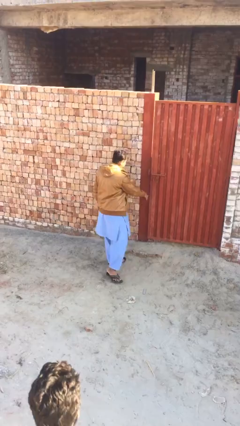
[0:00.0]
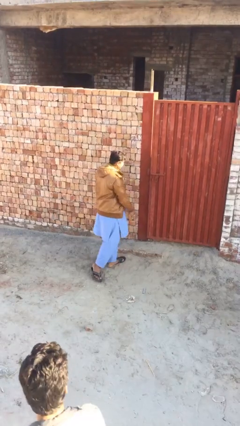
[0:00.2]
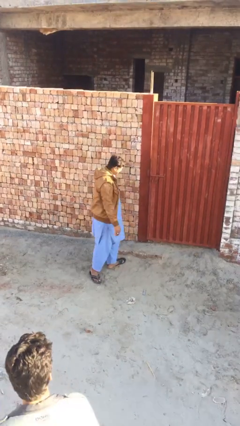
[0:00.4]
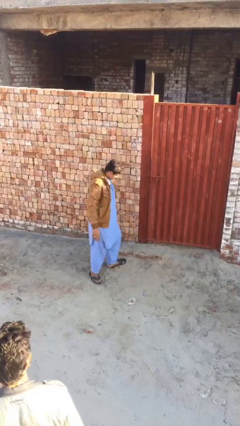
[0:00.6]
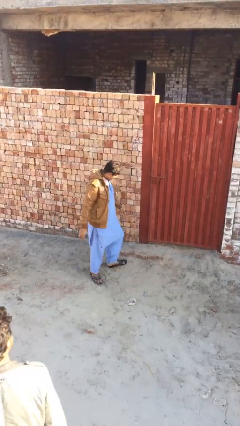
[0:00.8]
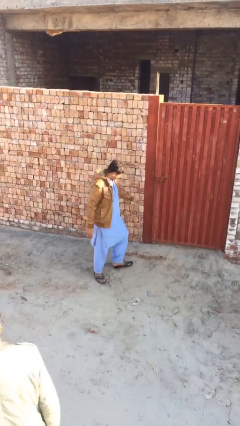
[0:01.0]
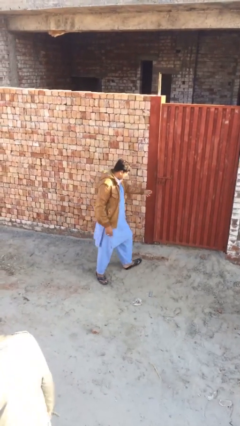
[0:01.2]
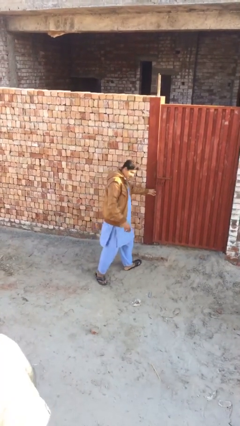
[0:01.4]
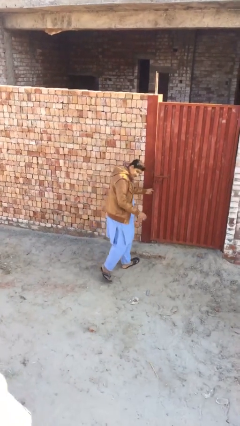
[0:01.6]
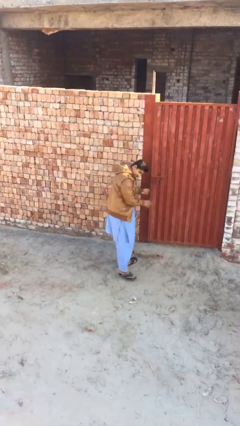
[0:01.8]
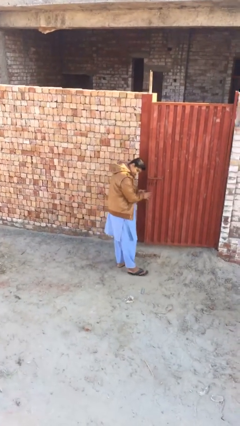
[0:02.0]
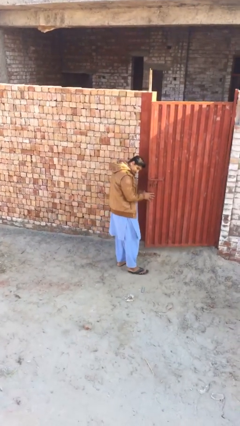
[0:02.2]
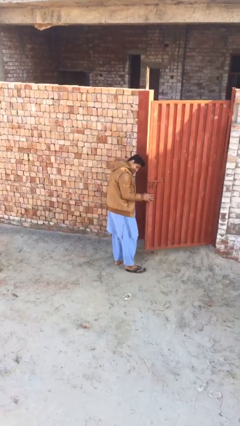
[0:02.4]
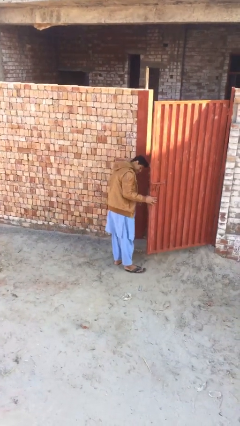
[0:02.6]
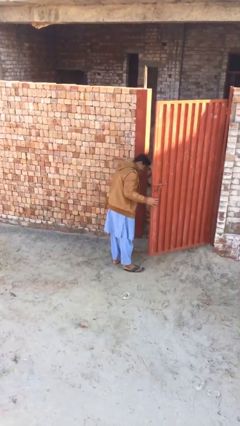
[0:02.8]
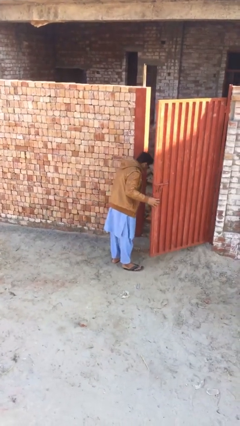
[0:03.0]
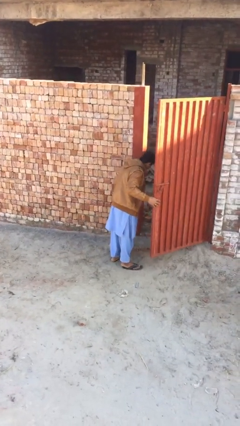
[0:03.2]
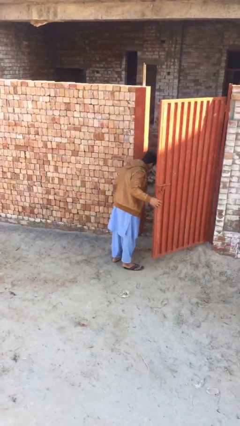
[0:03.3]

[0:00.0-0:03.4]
person opens facility door

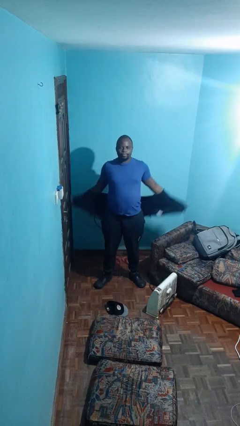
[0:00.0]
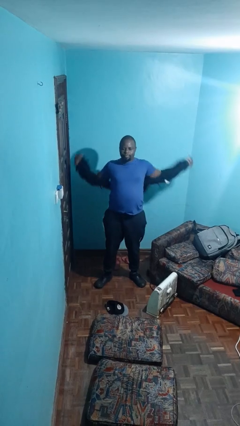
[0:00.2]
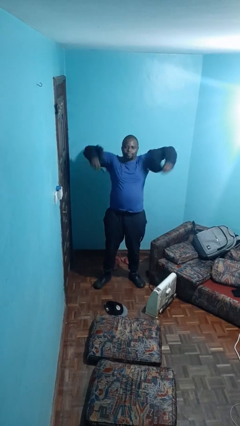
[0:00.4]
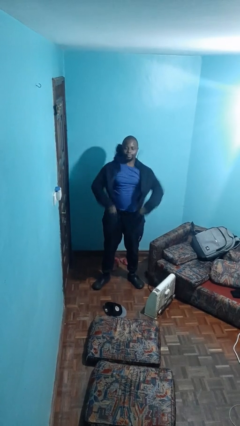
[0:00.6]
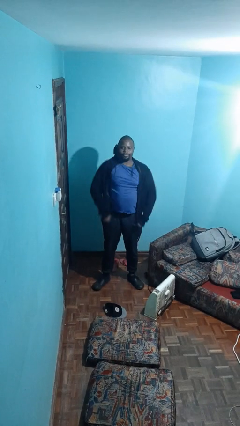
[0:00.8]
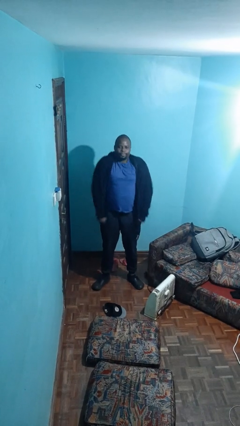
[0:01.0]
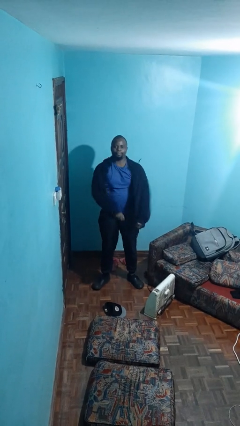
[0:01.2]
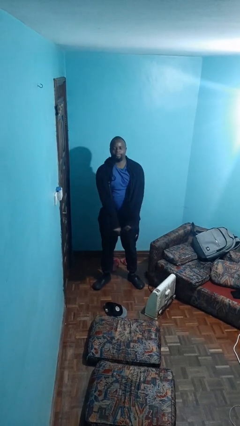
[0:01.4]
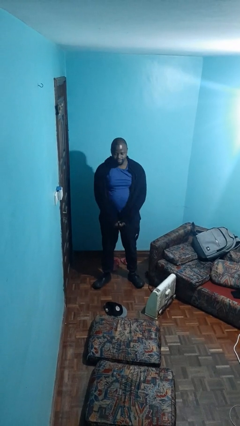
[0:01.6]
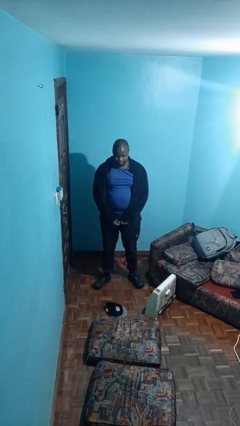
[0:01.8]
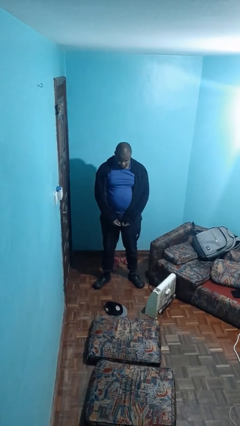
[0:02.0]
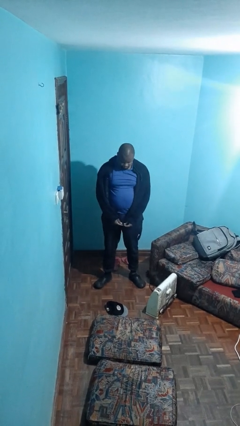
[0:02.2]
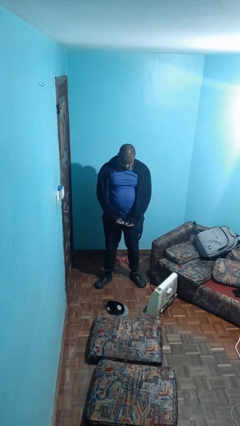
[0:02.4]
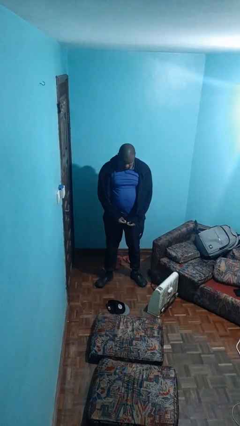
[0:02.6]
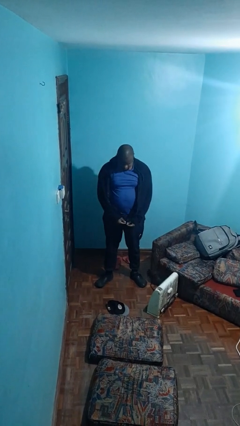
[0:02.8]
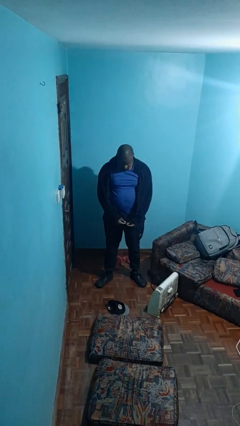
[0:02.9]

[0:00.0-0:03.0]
person puts on jacket

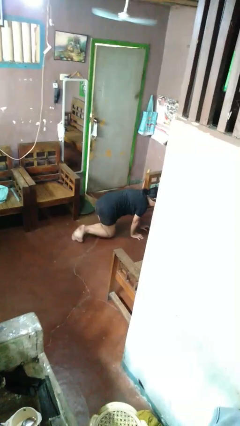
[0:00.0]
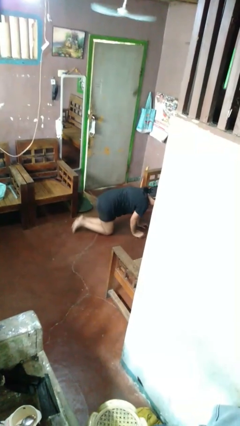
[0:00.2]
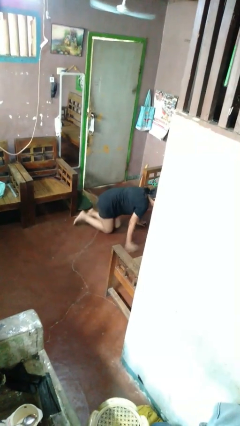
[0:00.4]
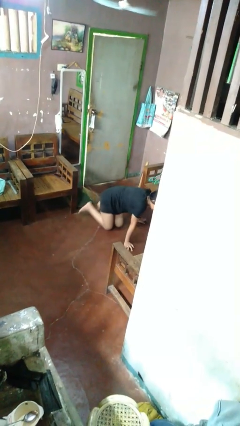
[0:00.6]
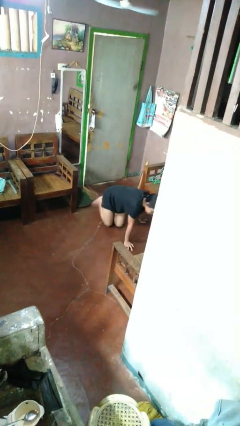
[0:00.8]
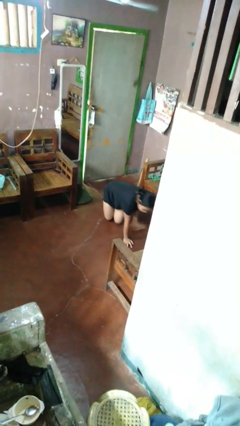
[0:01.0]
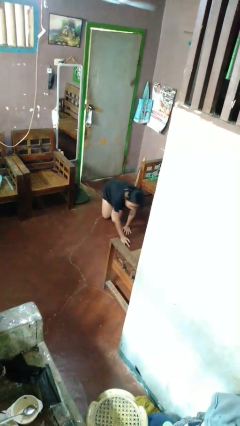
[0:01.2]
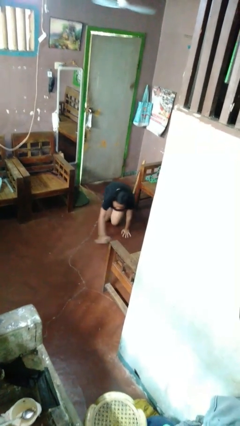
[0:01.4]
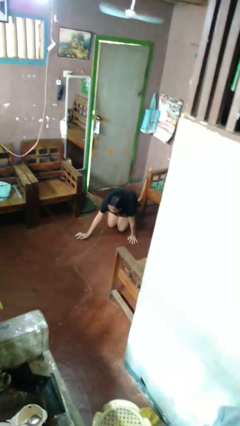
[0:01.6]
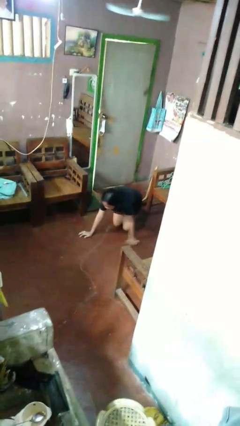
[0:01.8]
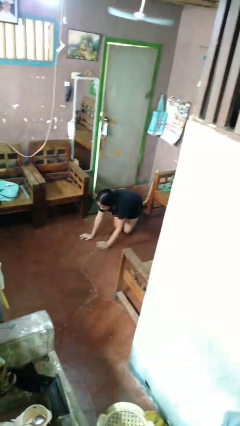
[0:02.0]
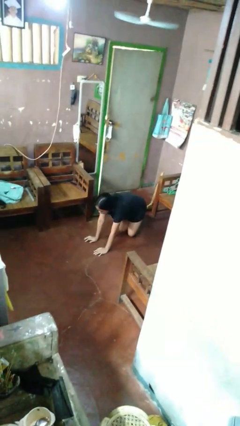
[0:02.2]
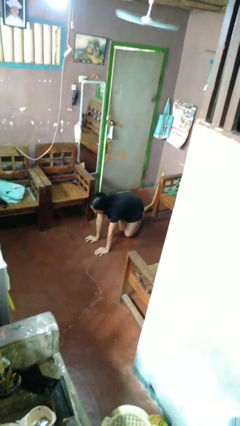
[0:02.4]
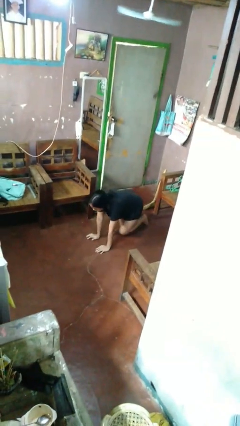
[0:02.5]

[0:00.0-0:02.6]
person crawls

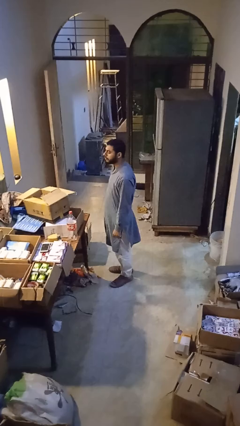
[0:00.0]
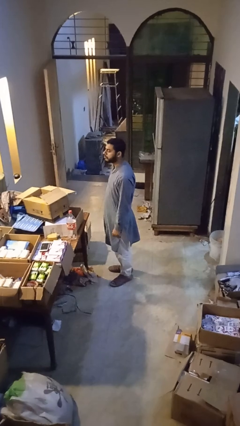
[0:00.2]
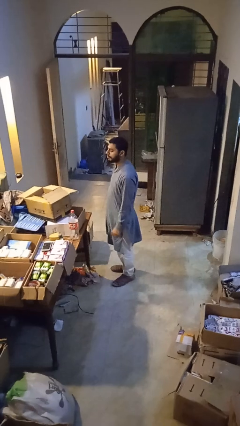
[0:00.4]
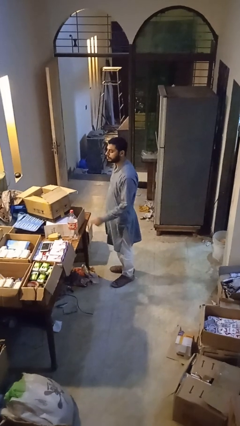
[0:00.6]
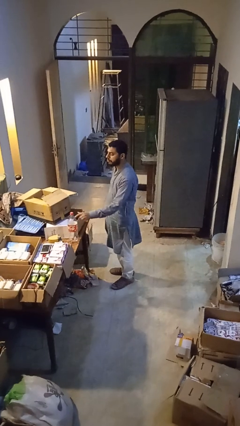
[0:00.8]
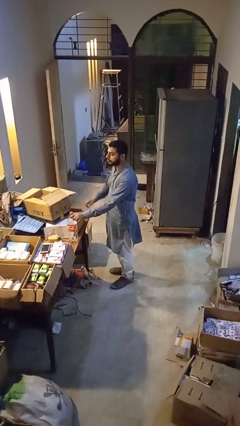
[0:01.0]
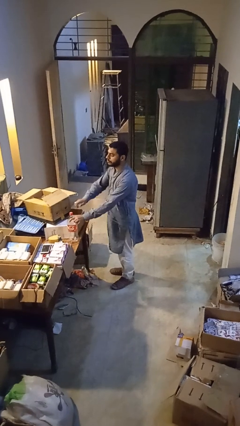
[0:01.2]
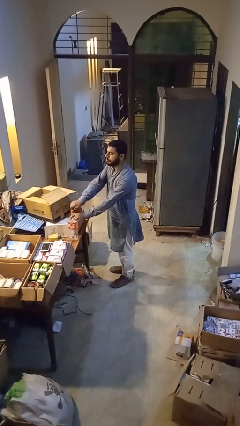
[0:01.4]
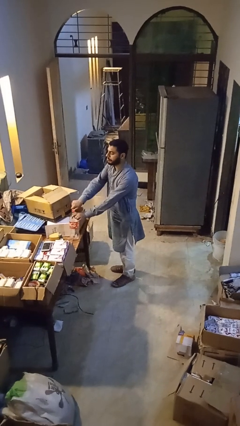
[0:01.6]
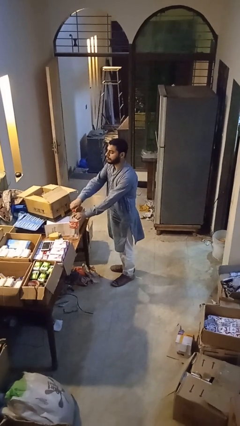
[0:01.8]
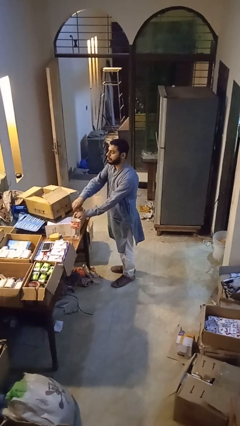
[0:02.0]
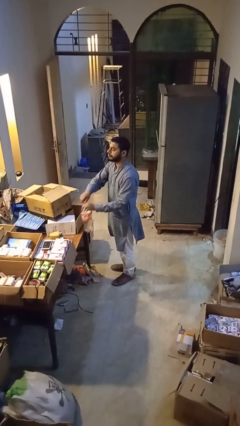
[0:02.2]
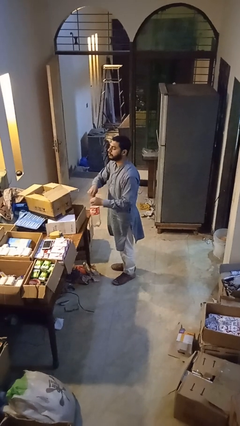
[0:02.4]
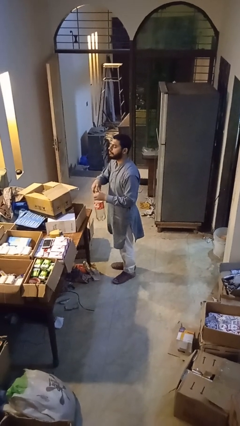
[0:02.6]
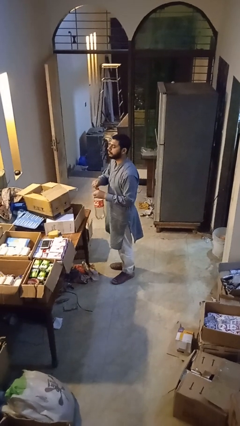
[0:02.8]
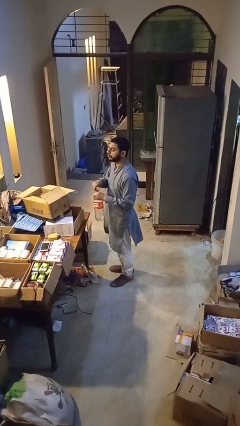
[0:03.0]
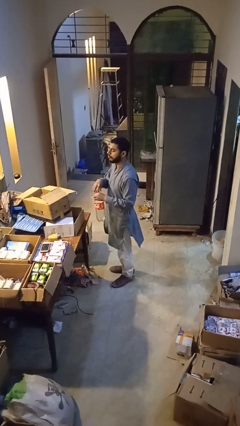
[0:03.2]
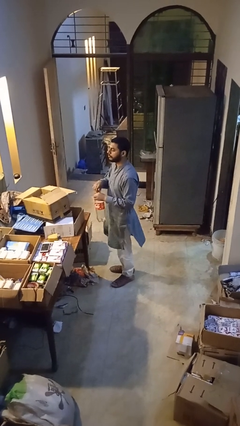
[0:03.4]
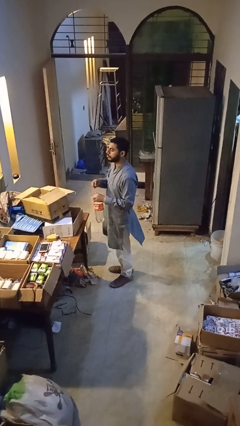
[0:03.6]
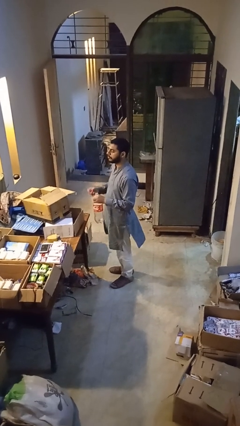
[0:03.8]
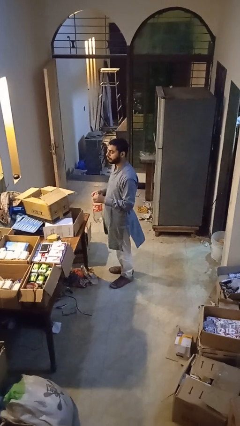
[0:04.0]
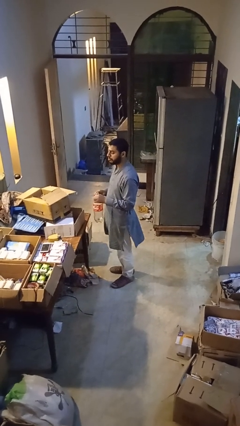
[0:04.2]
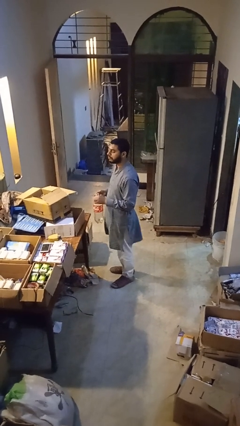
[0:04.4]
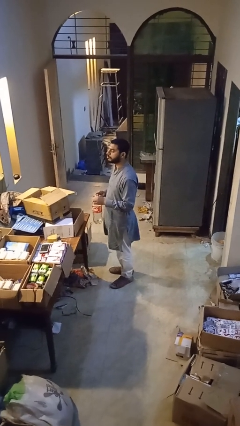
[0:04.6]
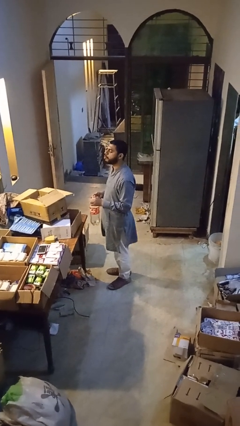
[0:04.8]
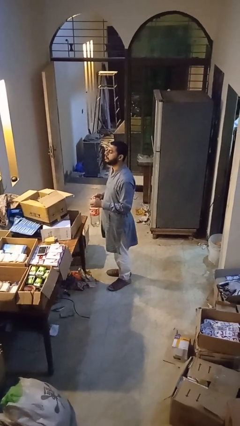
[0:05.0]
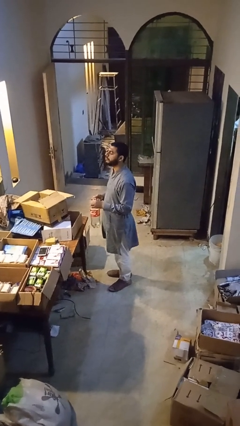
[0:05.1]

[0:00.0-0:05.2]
person unscrews lid from bottle

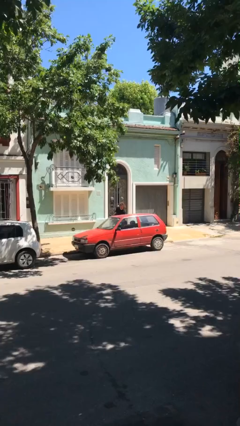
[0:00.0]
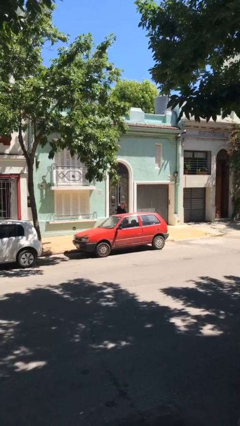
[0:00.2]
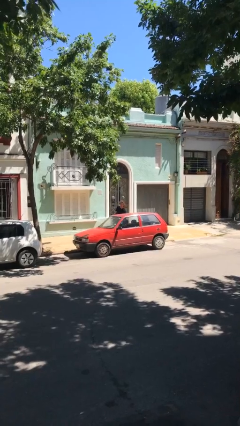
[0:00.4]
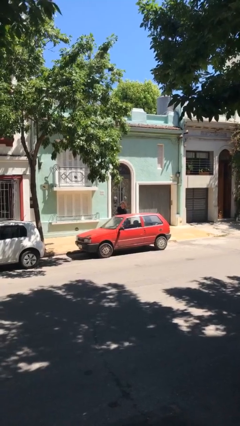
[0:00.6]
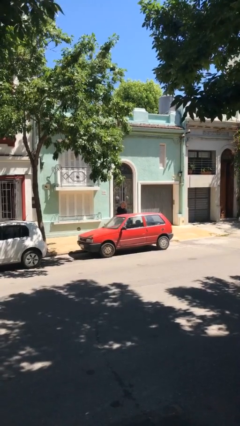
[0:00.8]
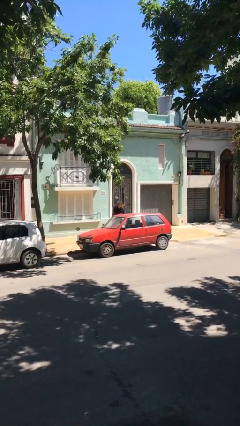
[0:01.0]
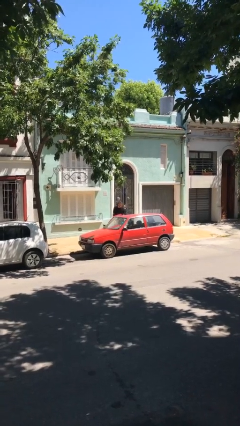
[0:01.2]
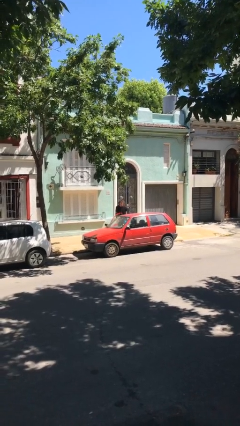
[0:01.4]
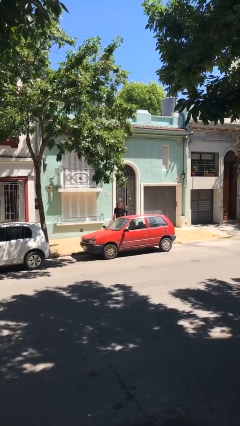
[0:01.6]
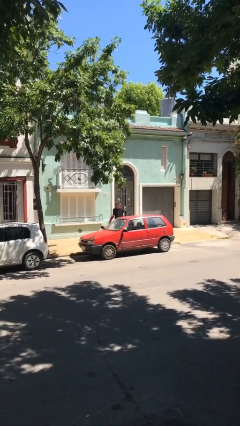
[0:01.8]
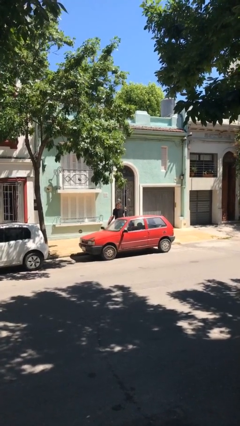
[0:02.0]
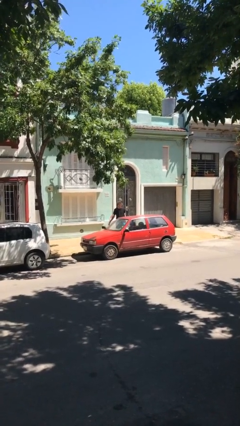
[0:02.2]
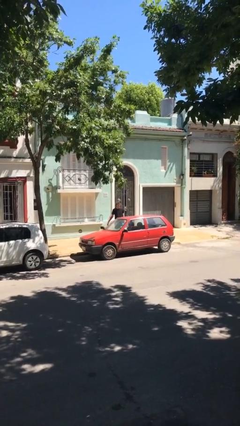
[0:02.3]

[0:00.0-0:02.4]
person opens car door

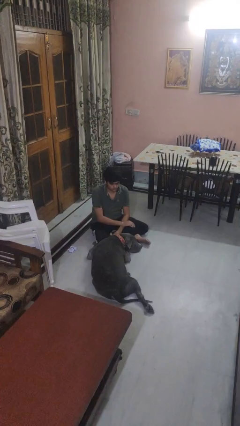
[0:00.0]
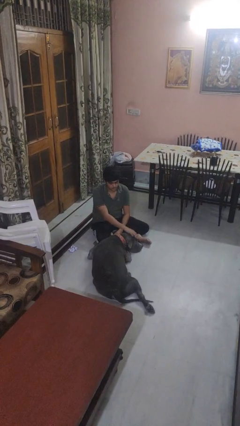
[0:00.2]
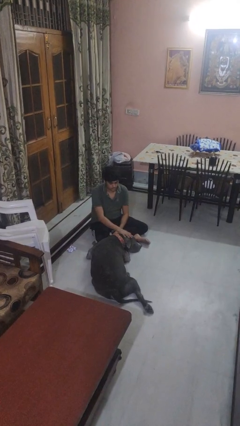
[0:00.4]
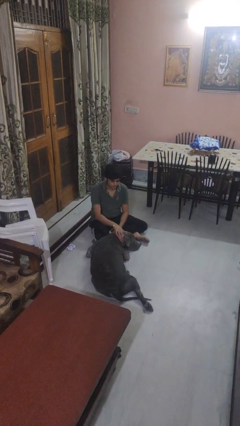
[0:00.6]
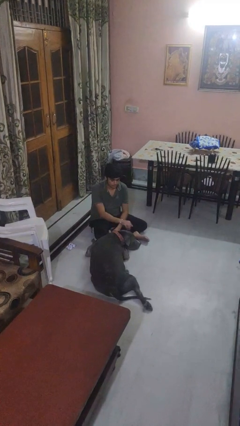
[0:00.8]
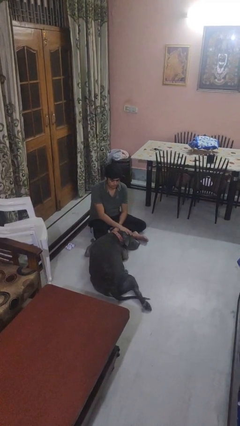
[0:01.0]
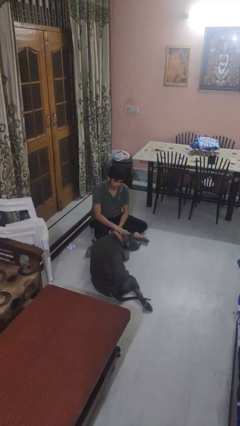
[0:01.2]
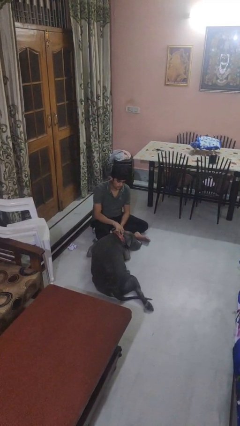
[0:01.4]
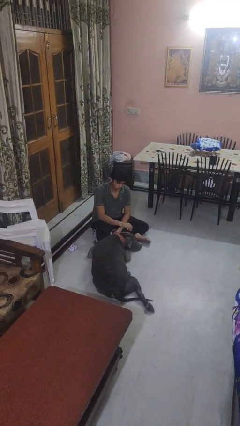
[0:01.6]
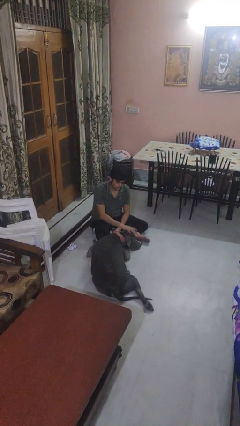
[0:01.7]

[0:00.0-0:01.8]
person pets dog
